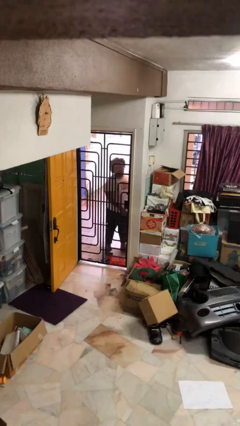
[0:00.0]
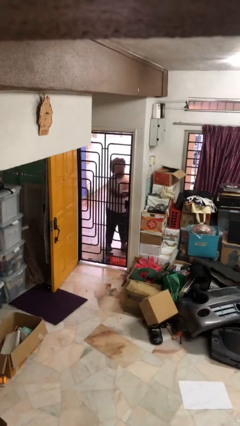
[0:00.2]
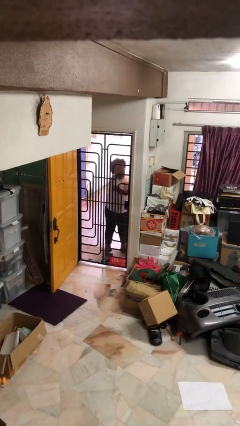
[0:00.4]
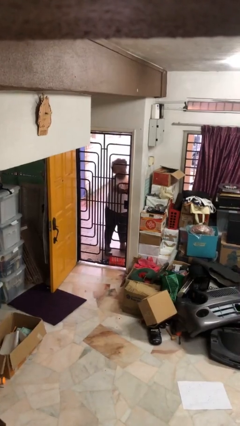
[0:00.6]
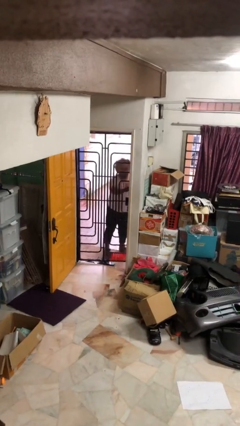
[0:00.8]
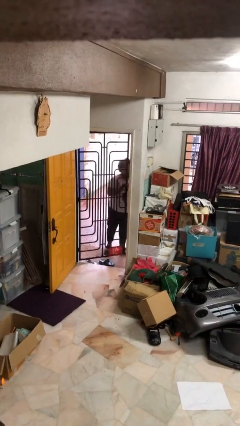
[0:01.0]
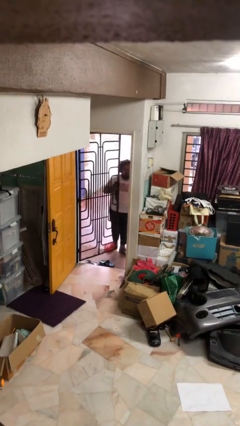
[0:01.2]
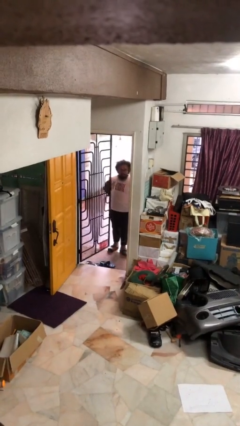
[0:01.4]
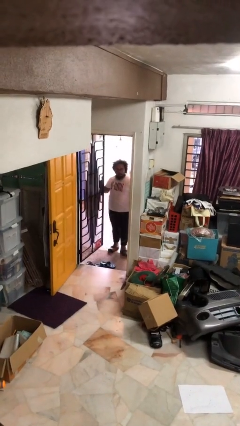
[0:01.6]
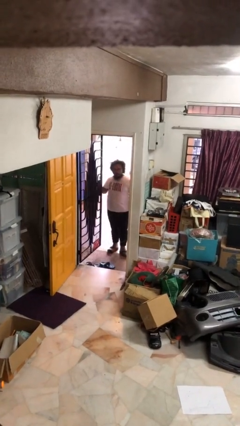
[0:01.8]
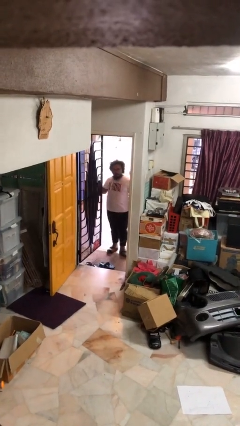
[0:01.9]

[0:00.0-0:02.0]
person opens facility door

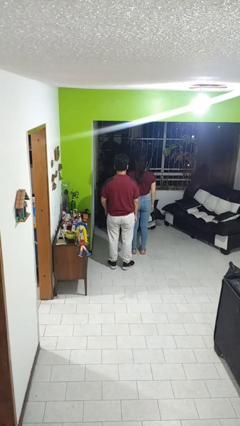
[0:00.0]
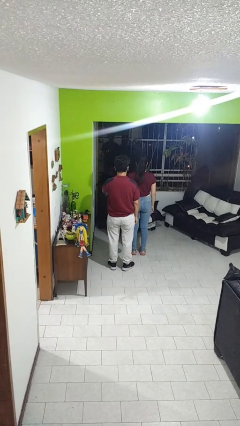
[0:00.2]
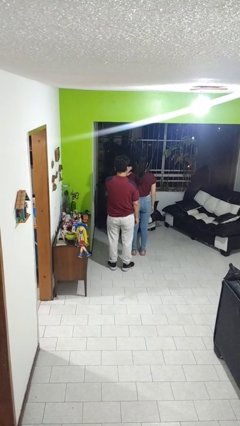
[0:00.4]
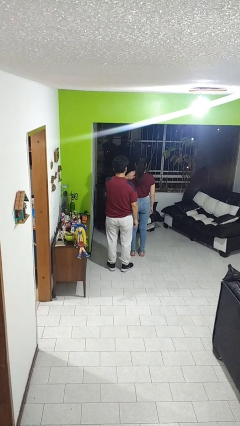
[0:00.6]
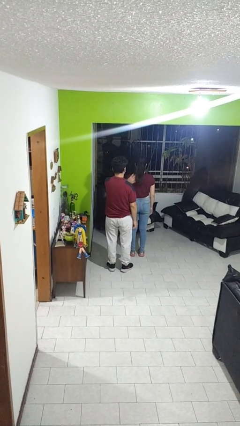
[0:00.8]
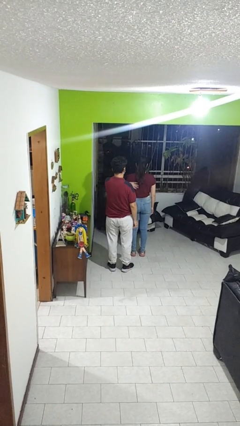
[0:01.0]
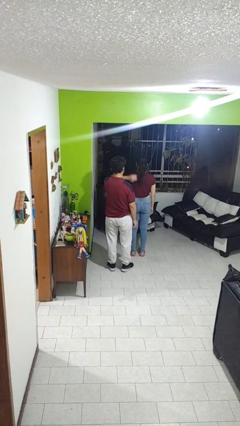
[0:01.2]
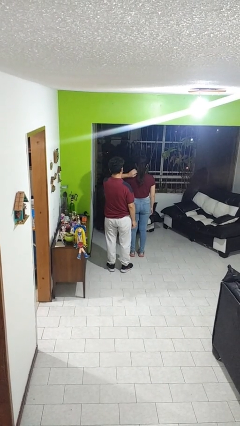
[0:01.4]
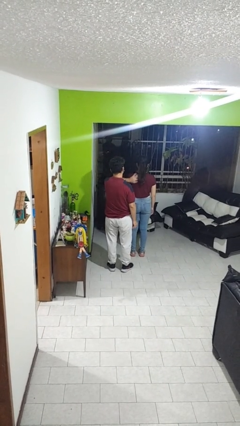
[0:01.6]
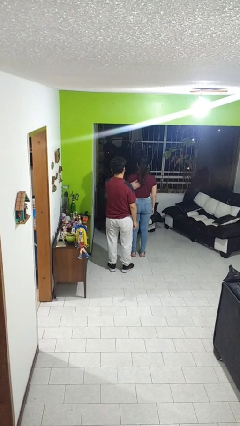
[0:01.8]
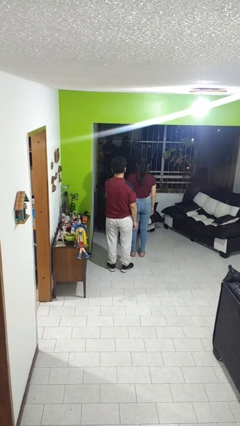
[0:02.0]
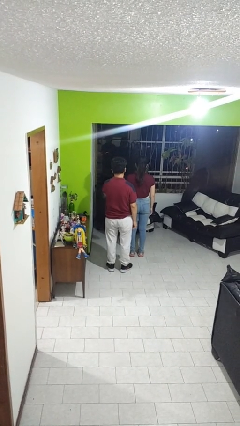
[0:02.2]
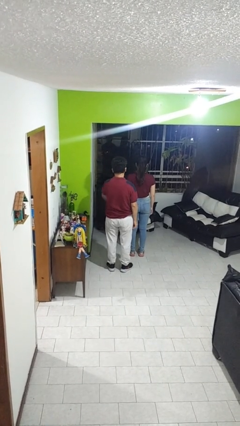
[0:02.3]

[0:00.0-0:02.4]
person touches back of person

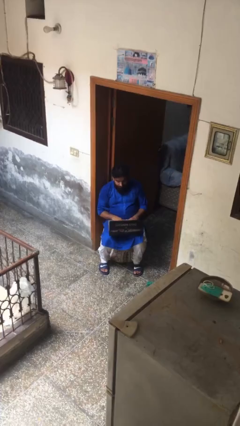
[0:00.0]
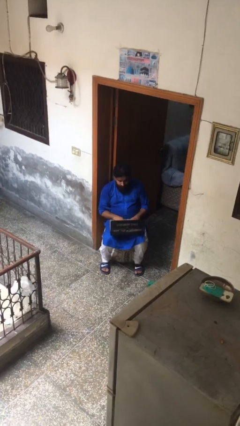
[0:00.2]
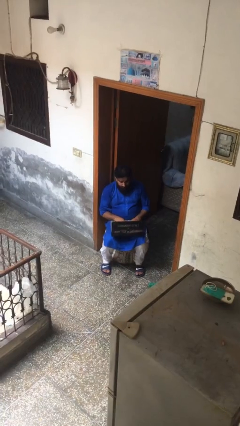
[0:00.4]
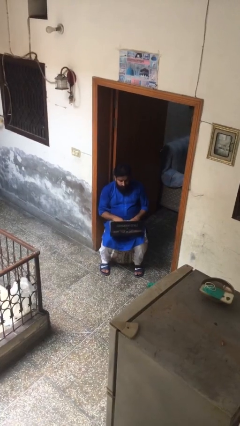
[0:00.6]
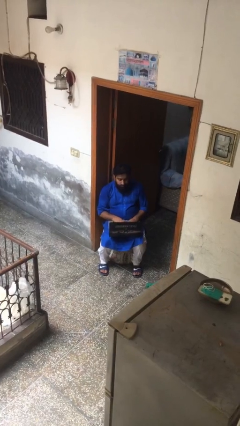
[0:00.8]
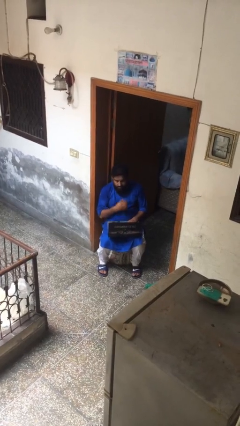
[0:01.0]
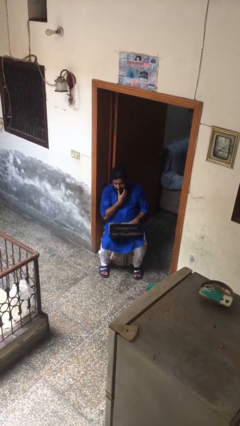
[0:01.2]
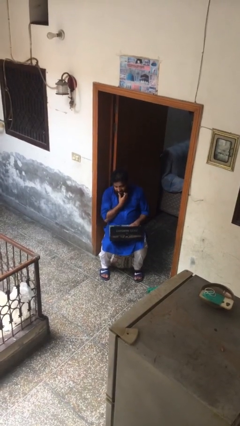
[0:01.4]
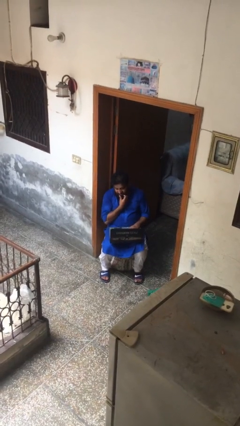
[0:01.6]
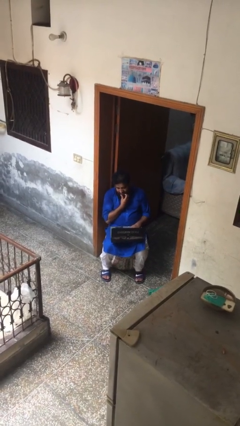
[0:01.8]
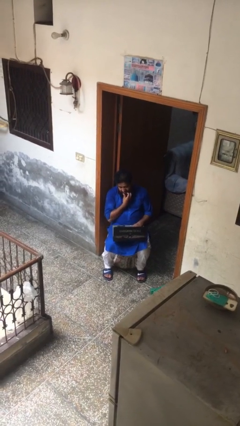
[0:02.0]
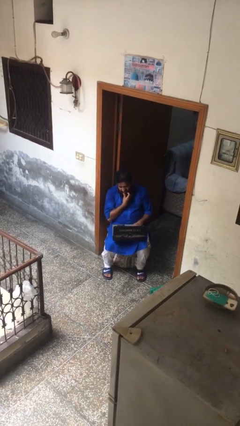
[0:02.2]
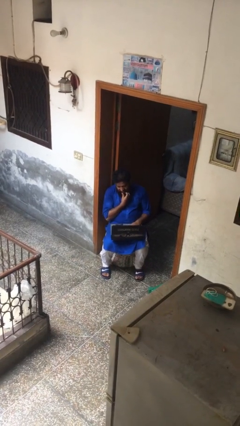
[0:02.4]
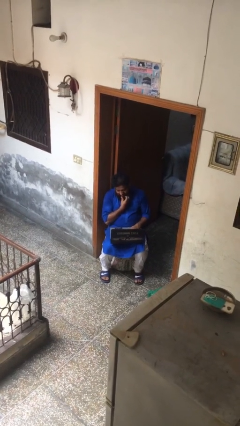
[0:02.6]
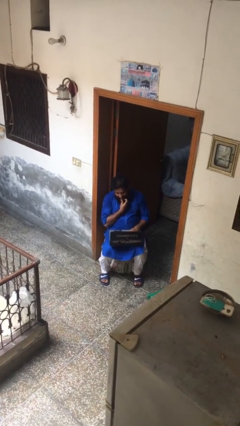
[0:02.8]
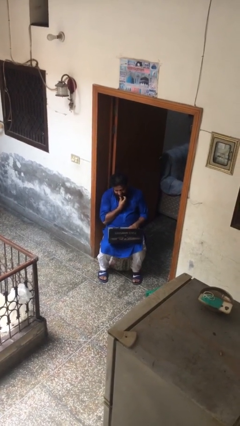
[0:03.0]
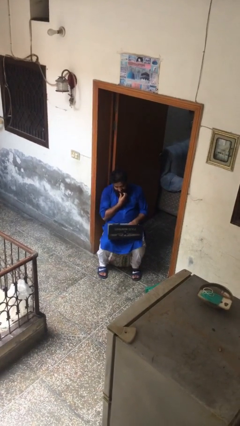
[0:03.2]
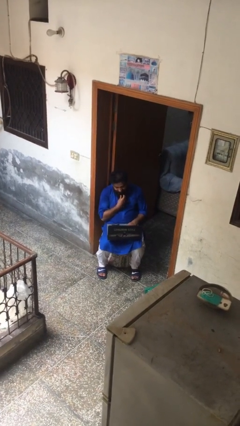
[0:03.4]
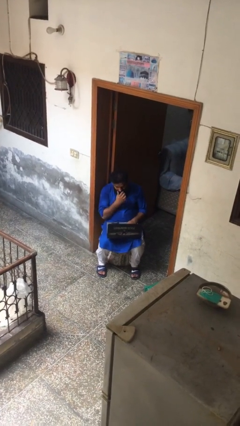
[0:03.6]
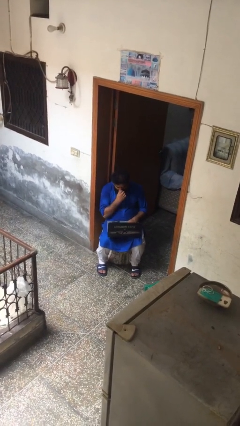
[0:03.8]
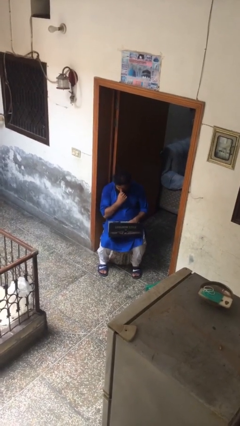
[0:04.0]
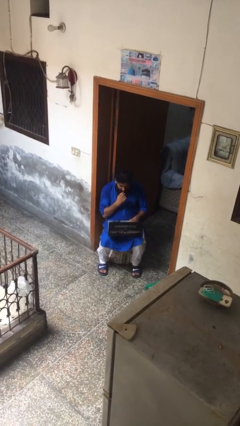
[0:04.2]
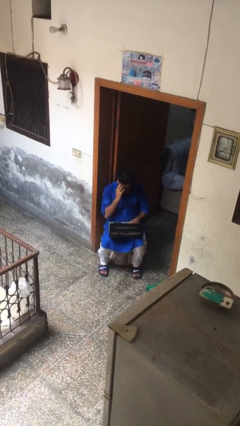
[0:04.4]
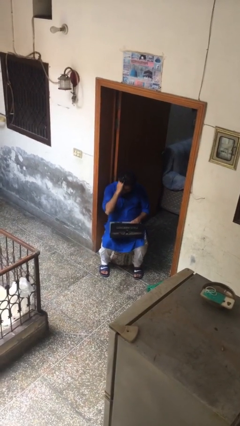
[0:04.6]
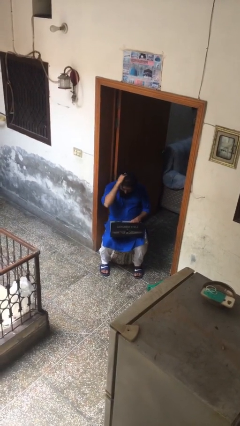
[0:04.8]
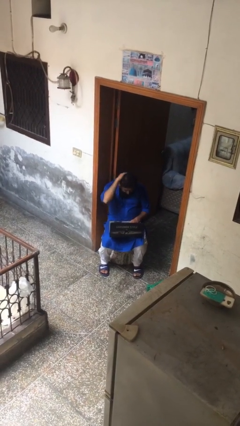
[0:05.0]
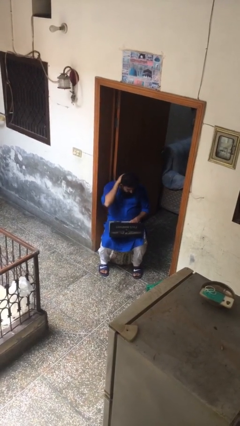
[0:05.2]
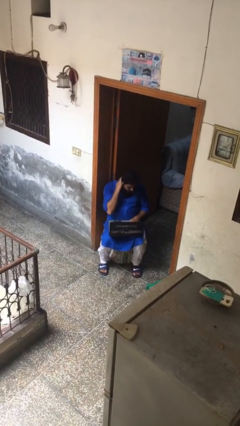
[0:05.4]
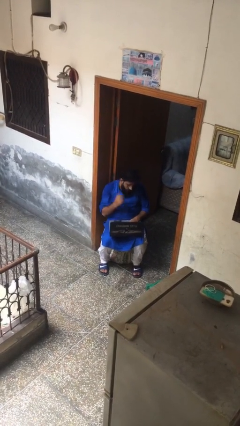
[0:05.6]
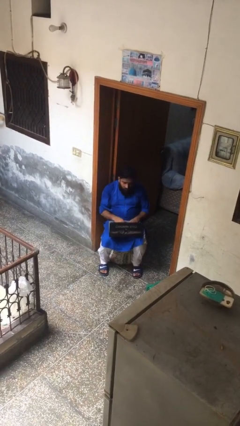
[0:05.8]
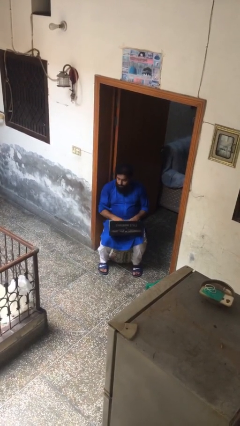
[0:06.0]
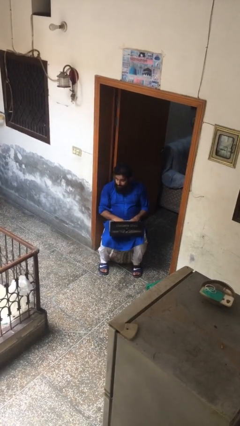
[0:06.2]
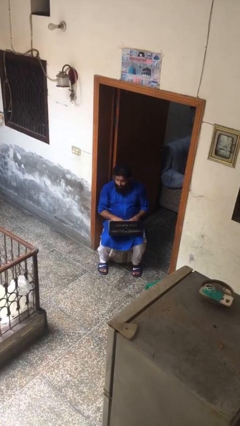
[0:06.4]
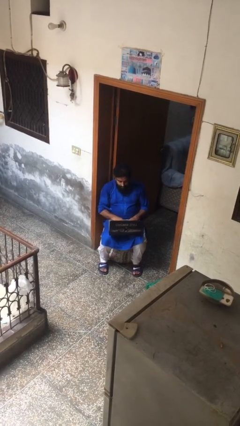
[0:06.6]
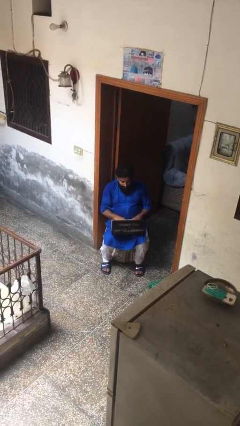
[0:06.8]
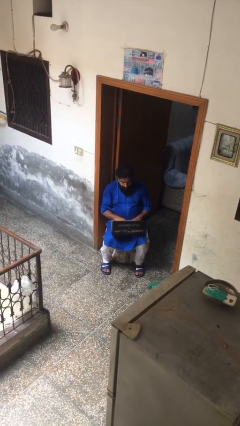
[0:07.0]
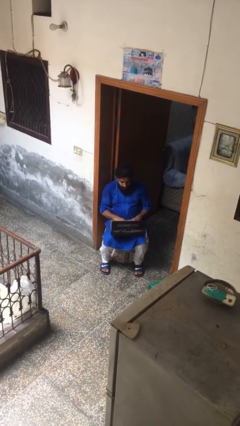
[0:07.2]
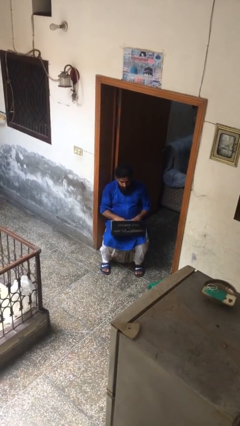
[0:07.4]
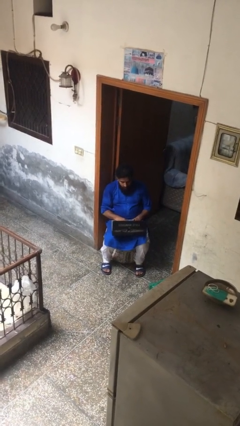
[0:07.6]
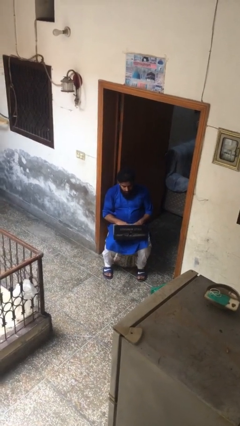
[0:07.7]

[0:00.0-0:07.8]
person interacts with laptop

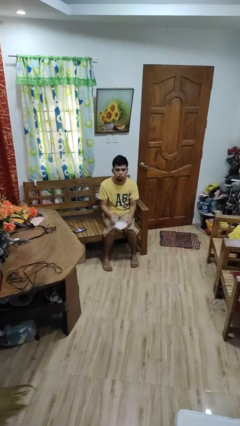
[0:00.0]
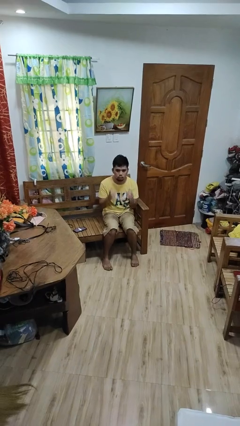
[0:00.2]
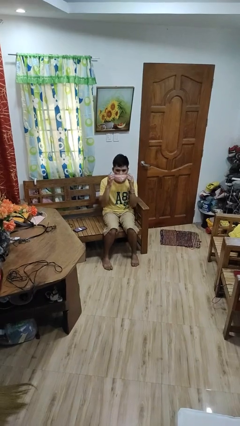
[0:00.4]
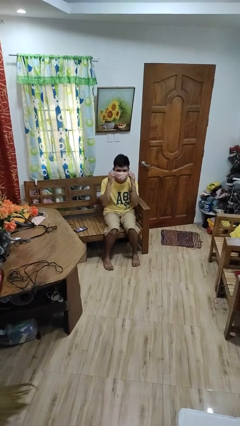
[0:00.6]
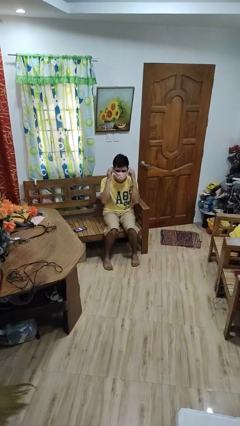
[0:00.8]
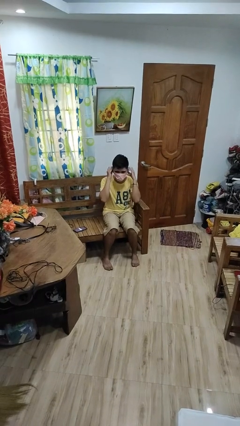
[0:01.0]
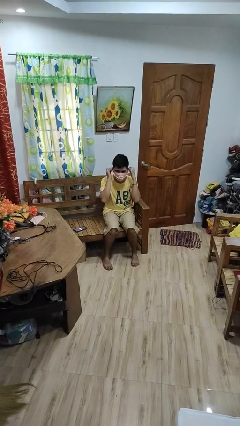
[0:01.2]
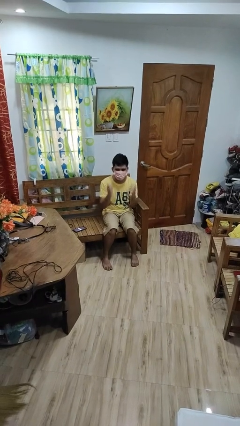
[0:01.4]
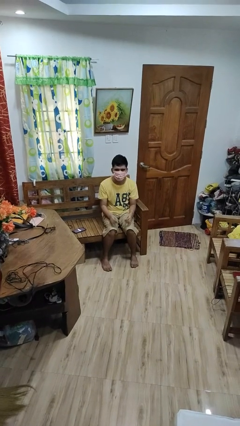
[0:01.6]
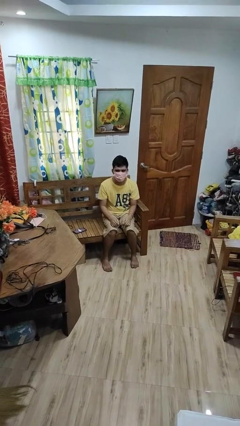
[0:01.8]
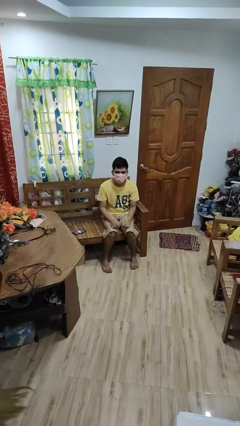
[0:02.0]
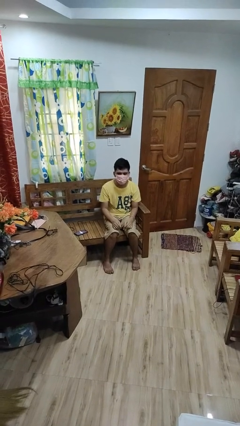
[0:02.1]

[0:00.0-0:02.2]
person puts on facemask

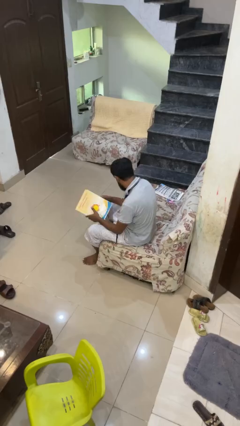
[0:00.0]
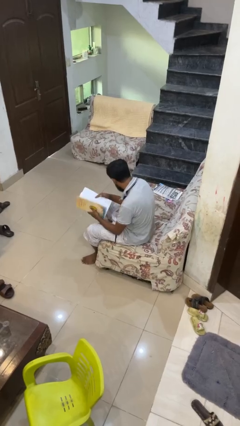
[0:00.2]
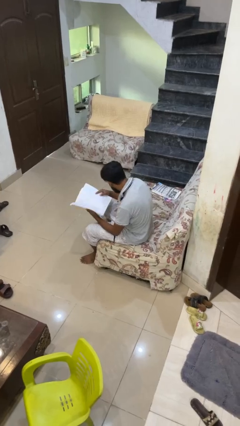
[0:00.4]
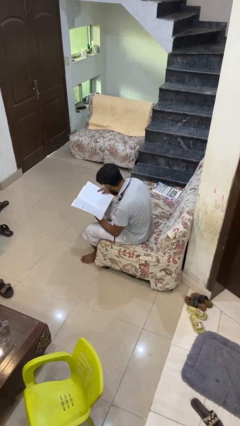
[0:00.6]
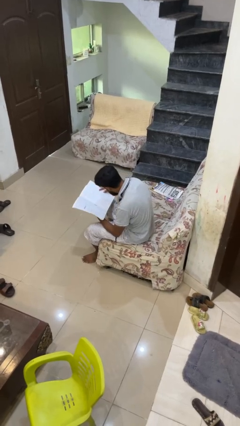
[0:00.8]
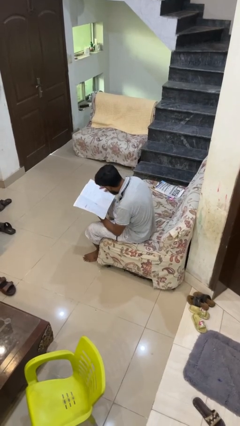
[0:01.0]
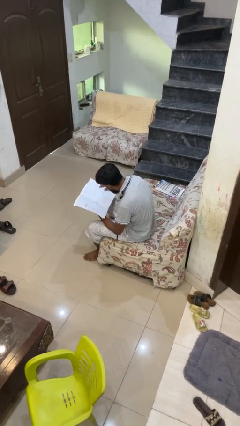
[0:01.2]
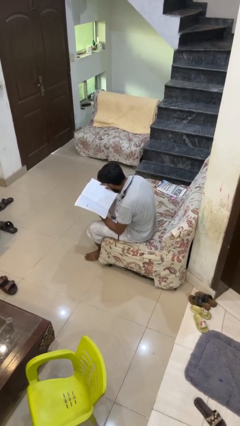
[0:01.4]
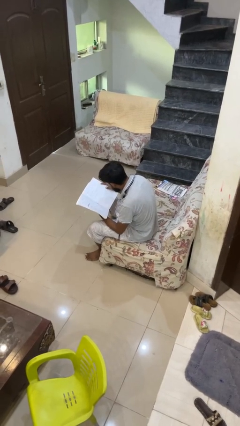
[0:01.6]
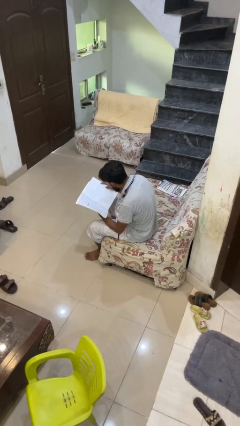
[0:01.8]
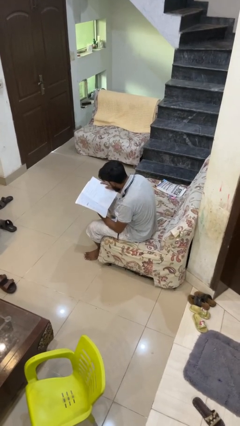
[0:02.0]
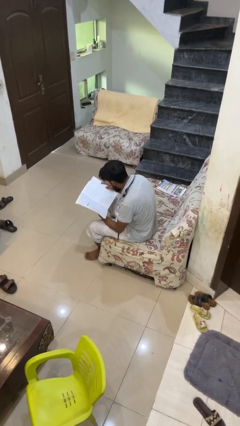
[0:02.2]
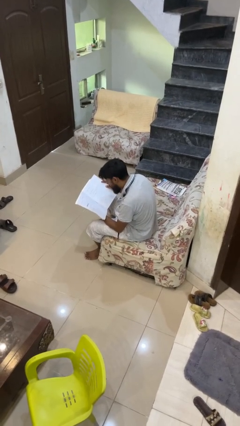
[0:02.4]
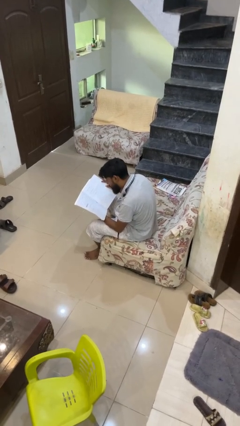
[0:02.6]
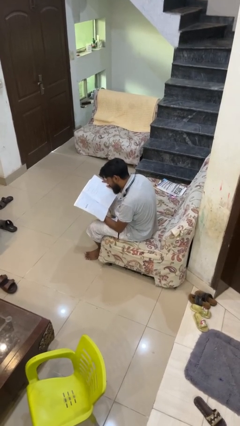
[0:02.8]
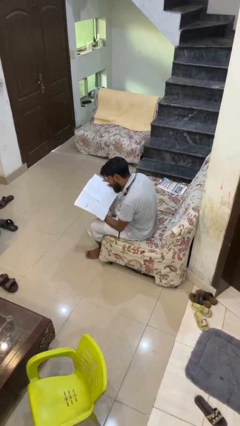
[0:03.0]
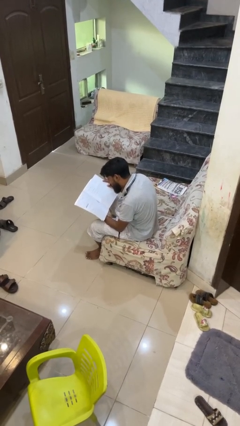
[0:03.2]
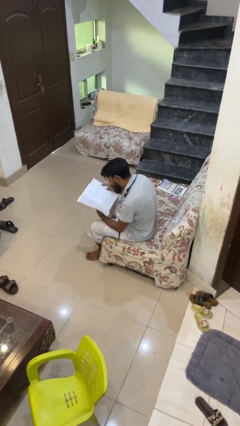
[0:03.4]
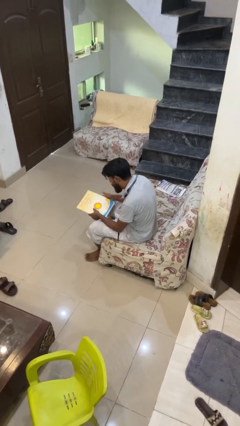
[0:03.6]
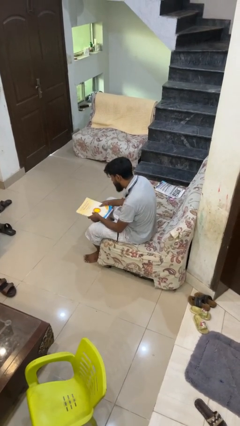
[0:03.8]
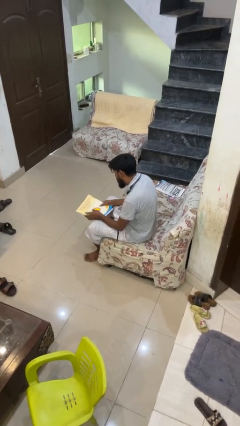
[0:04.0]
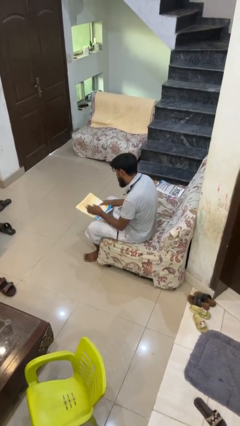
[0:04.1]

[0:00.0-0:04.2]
person reads book
